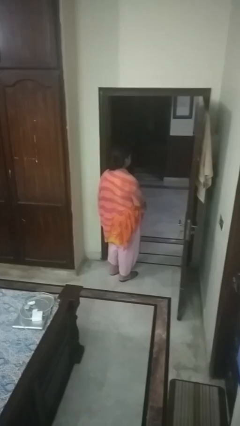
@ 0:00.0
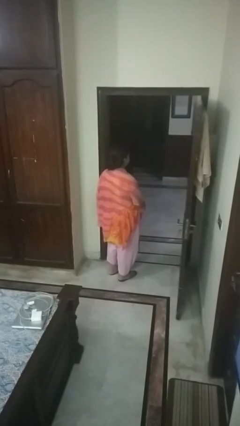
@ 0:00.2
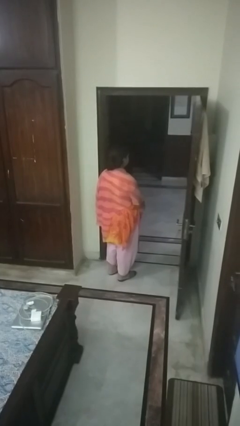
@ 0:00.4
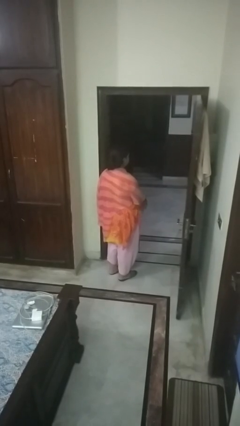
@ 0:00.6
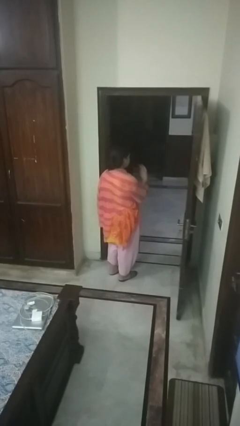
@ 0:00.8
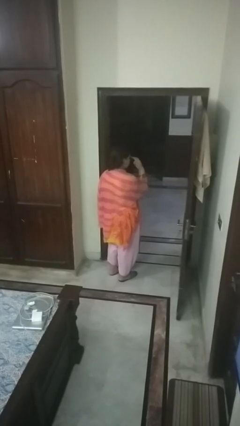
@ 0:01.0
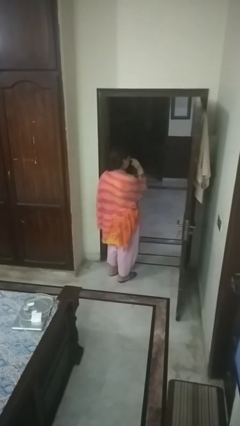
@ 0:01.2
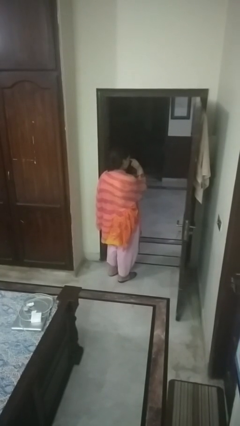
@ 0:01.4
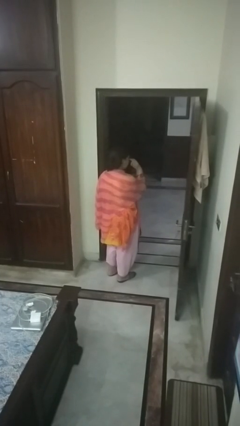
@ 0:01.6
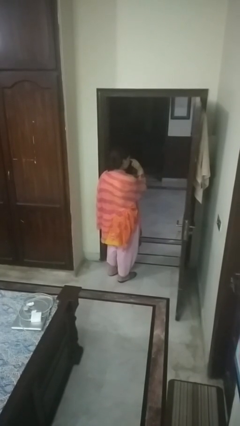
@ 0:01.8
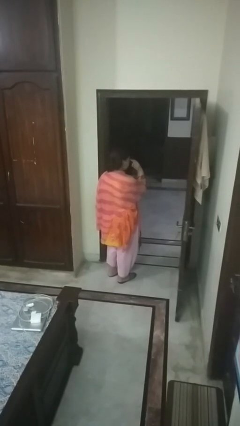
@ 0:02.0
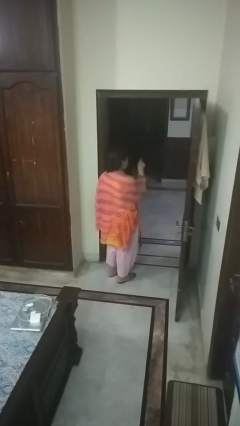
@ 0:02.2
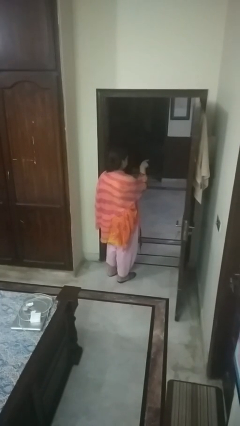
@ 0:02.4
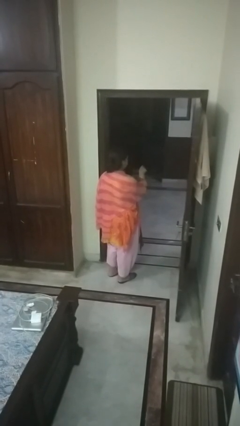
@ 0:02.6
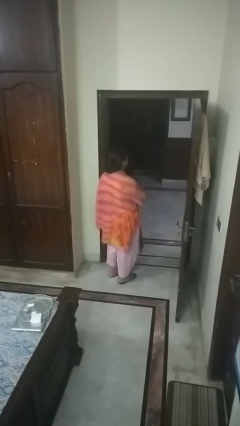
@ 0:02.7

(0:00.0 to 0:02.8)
person gestures watch closely

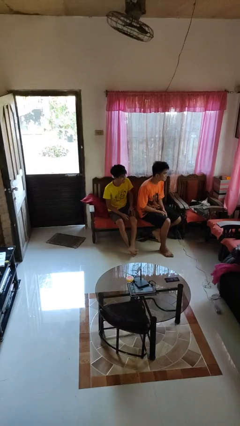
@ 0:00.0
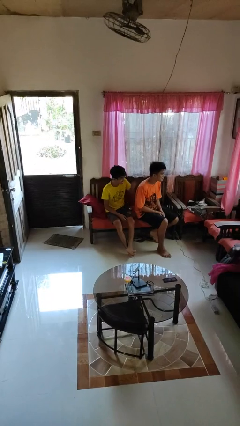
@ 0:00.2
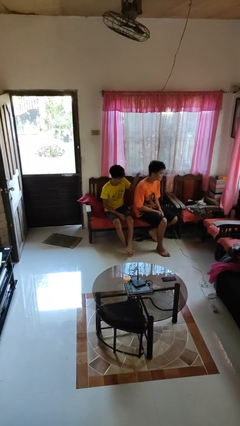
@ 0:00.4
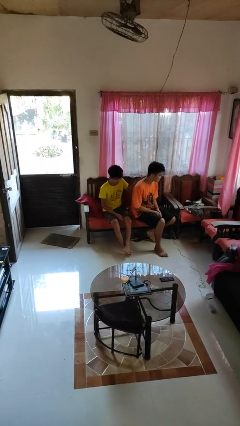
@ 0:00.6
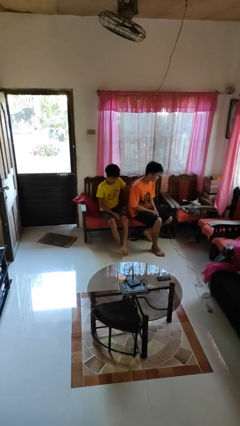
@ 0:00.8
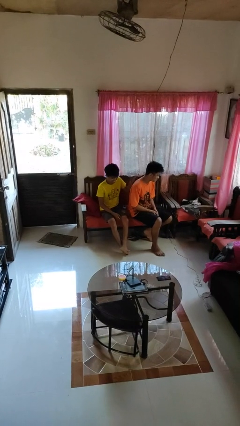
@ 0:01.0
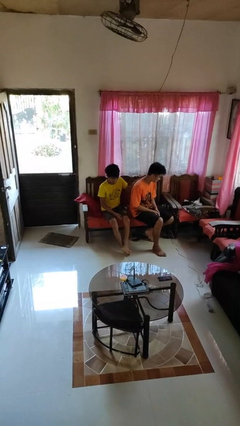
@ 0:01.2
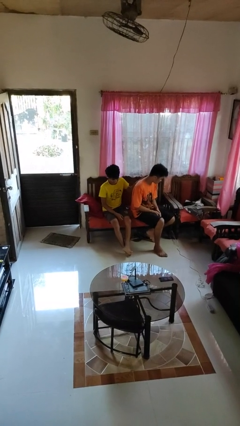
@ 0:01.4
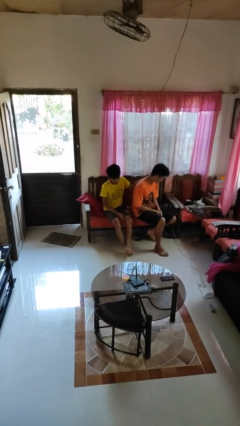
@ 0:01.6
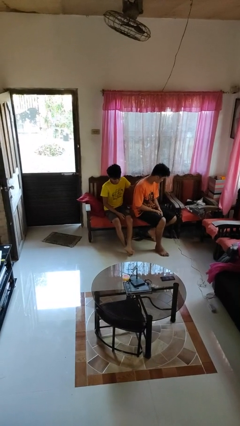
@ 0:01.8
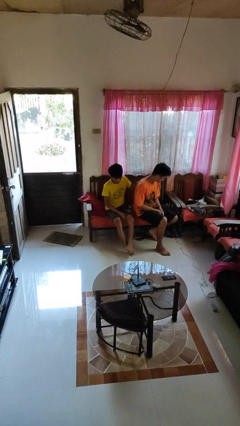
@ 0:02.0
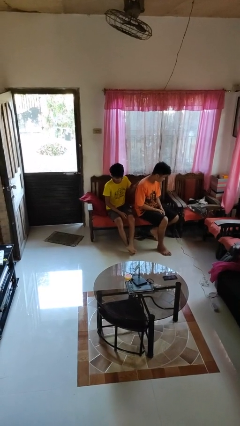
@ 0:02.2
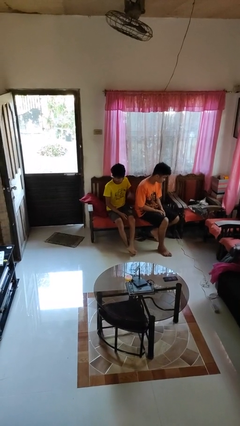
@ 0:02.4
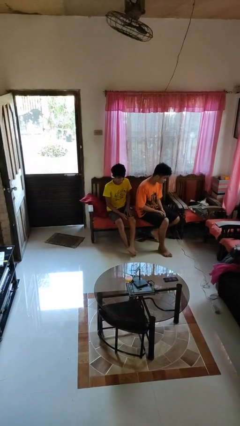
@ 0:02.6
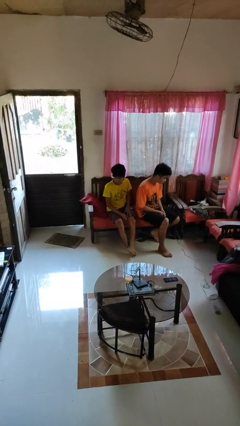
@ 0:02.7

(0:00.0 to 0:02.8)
person touches back of person

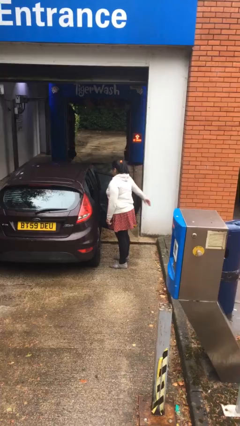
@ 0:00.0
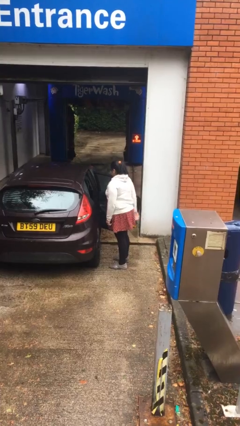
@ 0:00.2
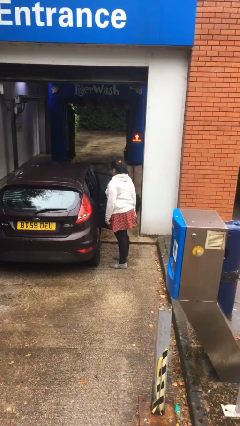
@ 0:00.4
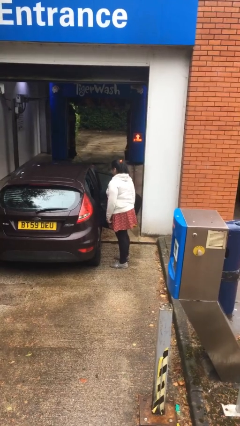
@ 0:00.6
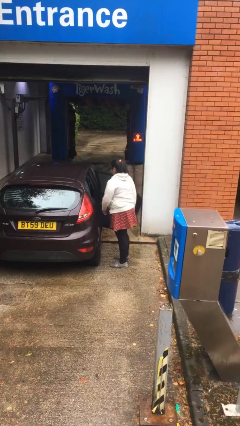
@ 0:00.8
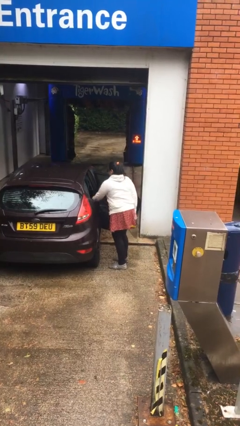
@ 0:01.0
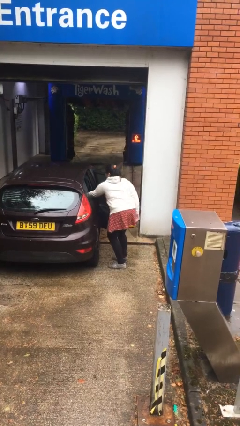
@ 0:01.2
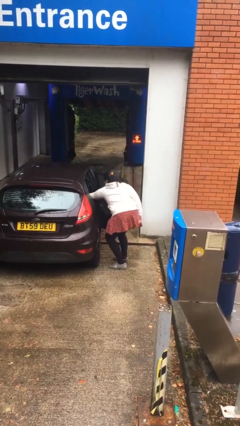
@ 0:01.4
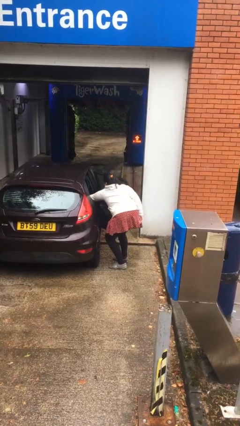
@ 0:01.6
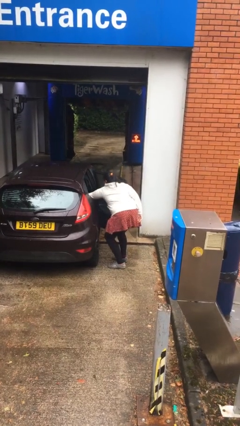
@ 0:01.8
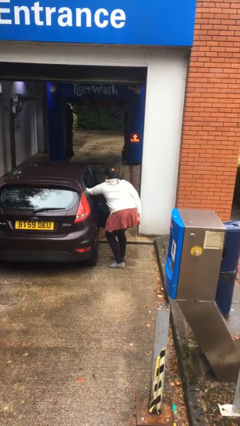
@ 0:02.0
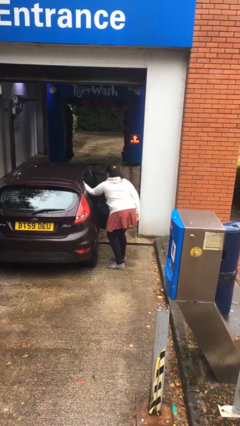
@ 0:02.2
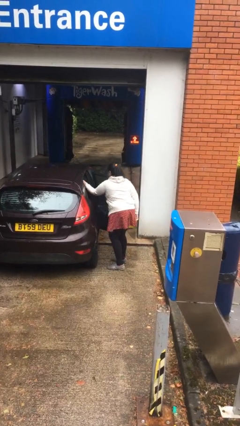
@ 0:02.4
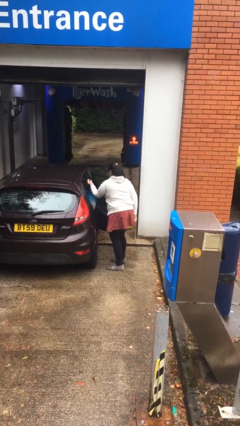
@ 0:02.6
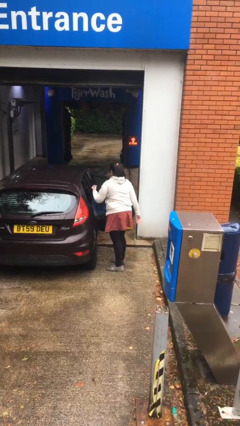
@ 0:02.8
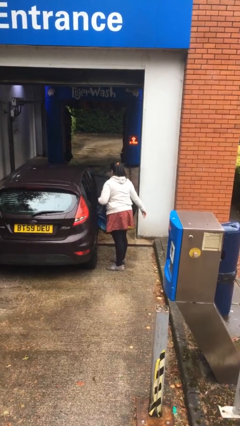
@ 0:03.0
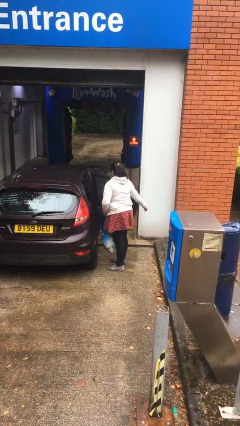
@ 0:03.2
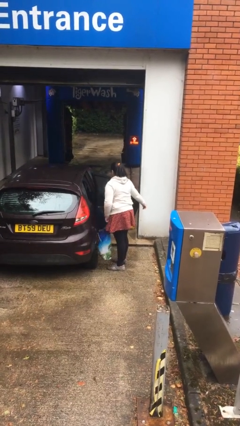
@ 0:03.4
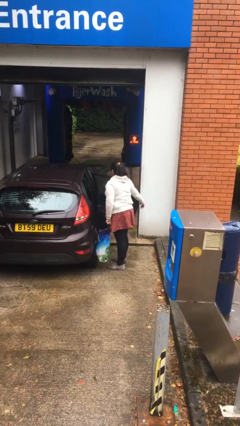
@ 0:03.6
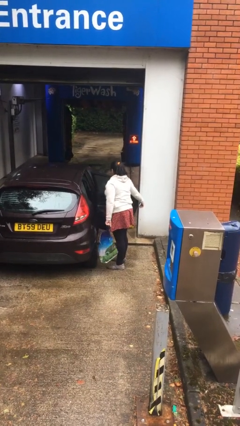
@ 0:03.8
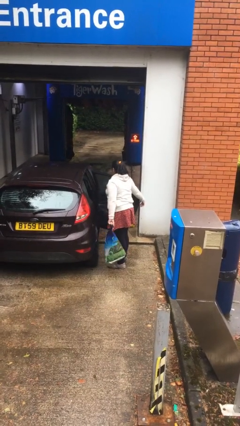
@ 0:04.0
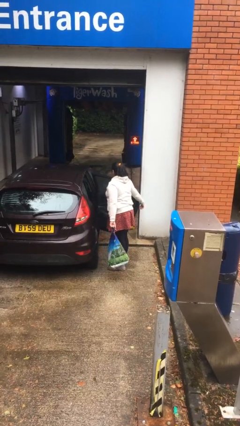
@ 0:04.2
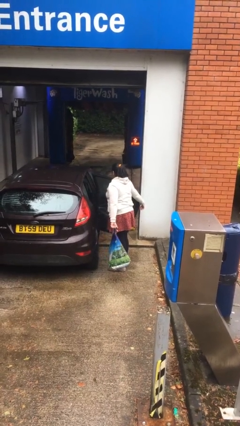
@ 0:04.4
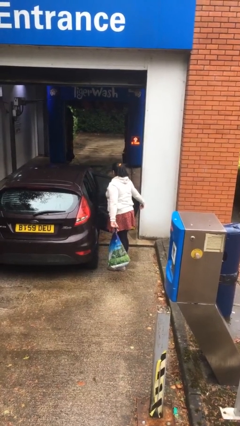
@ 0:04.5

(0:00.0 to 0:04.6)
person unloads car

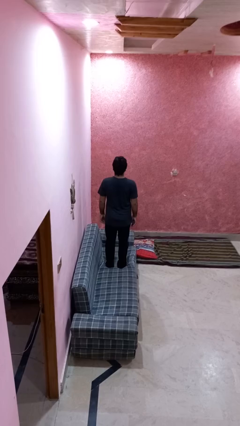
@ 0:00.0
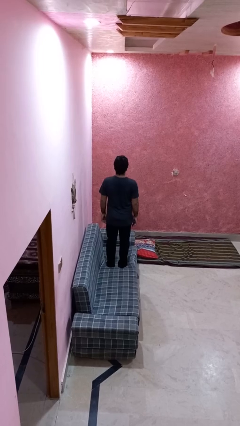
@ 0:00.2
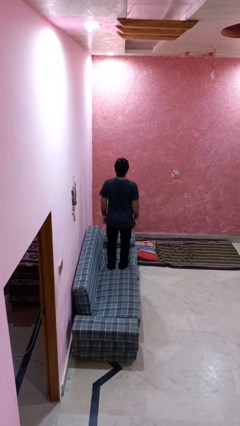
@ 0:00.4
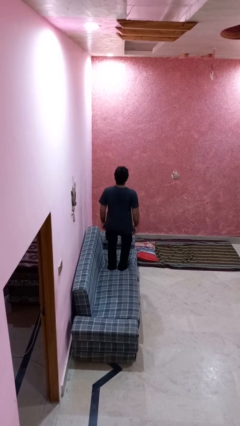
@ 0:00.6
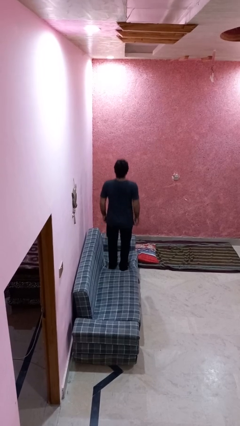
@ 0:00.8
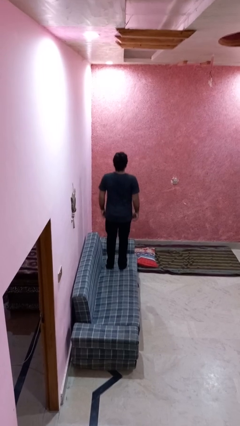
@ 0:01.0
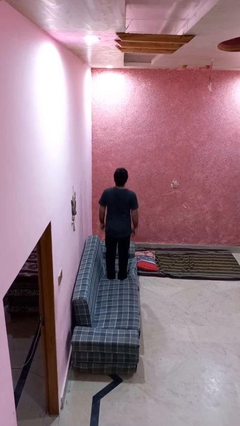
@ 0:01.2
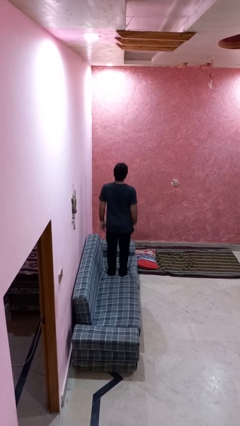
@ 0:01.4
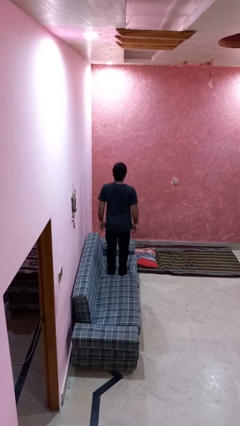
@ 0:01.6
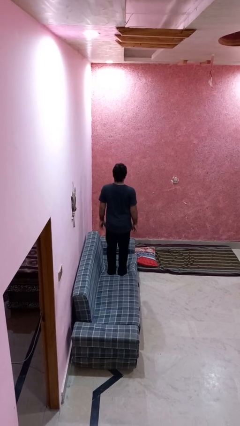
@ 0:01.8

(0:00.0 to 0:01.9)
person jumps on couch

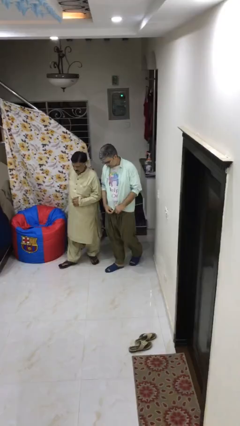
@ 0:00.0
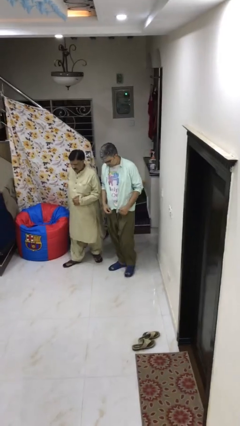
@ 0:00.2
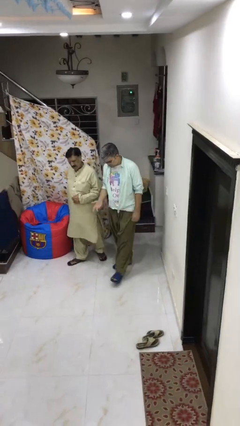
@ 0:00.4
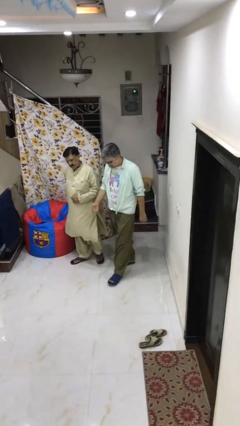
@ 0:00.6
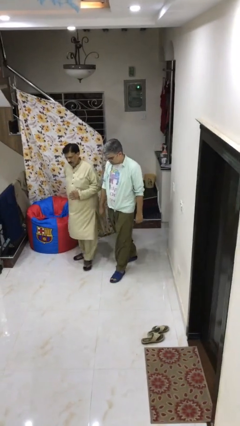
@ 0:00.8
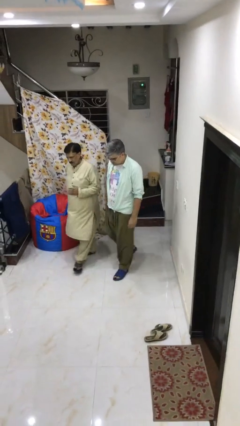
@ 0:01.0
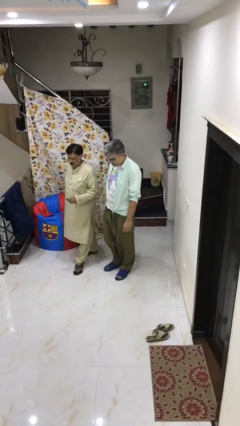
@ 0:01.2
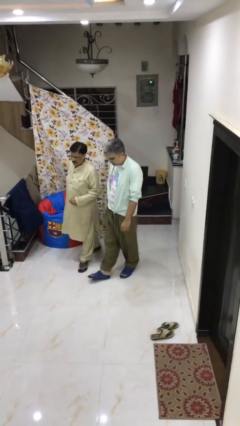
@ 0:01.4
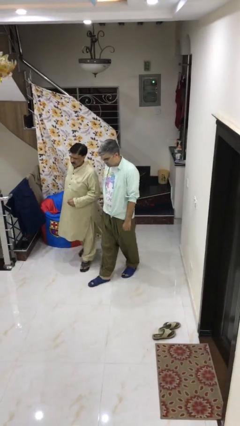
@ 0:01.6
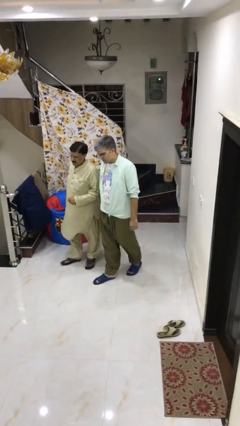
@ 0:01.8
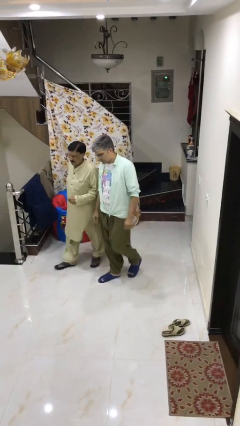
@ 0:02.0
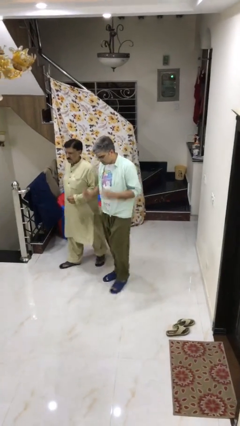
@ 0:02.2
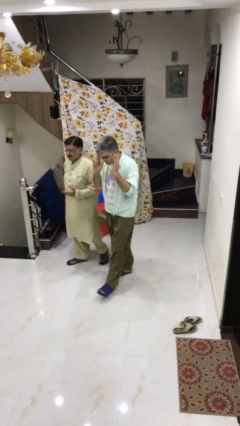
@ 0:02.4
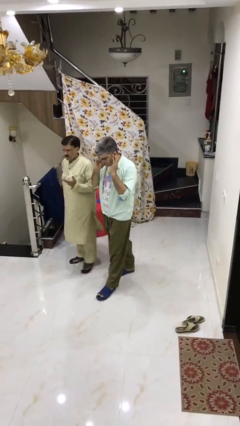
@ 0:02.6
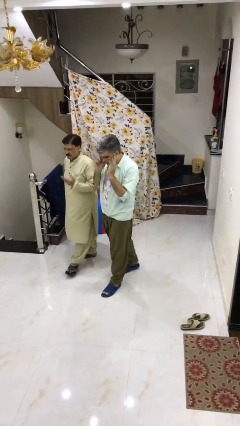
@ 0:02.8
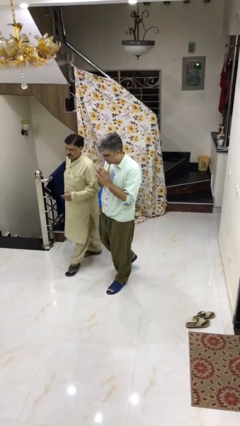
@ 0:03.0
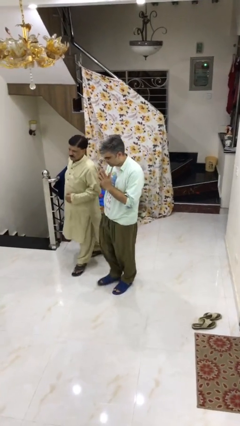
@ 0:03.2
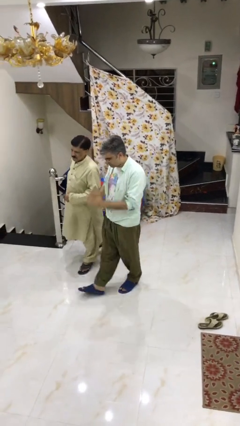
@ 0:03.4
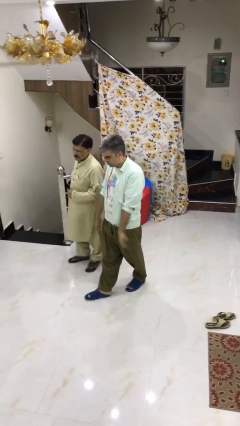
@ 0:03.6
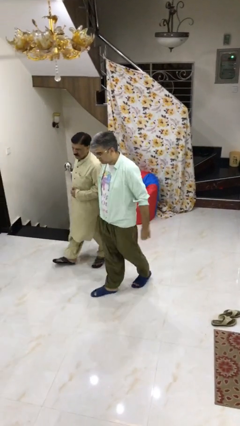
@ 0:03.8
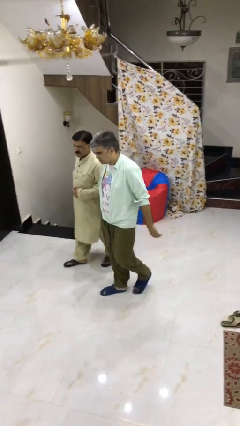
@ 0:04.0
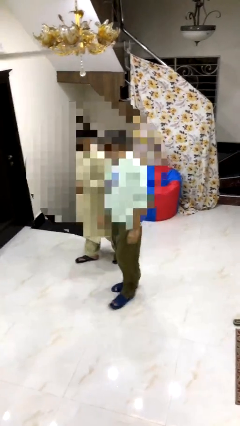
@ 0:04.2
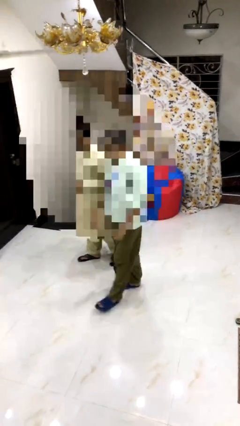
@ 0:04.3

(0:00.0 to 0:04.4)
person talks to person

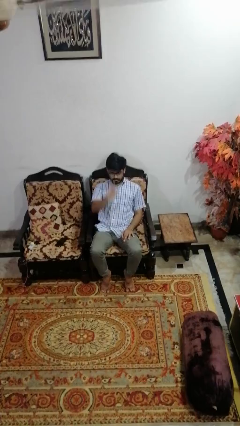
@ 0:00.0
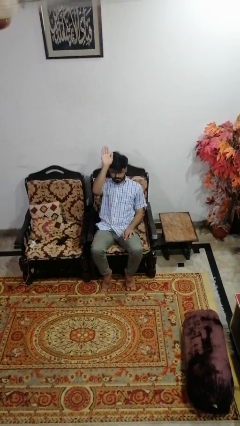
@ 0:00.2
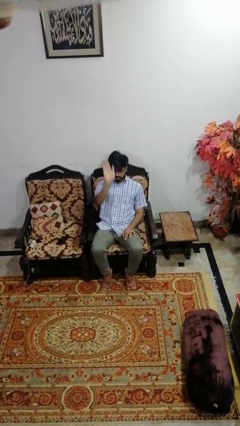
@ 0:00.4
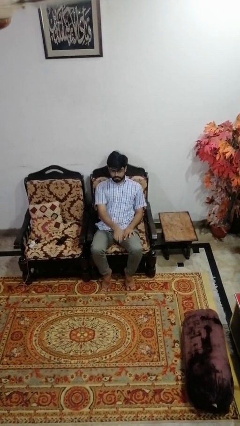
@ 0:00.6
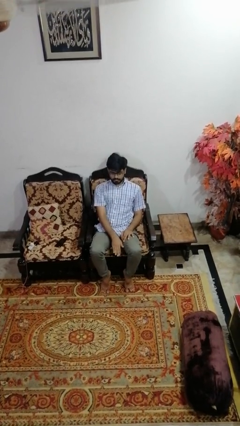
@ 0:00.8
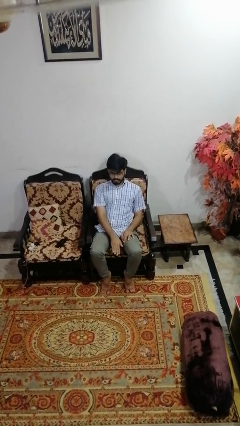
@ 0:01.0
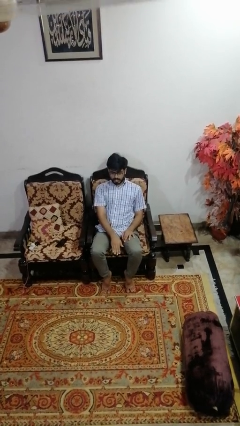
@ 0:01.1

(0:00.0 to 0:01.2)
person gestures swipe down
